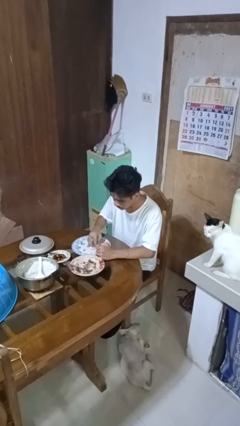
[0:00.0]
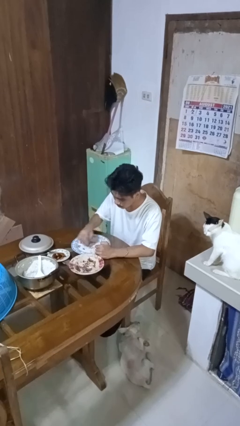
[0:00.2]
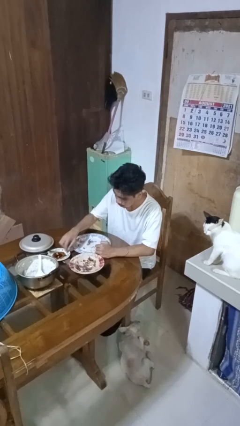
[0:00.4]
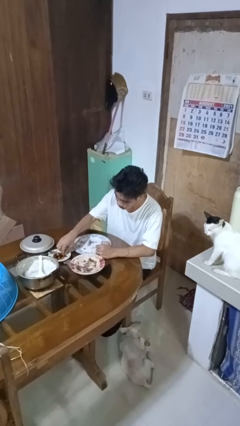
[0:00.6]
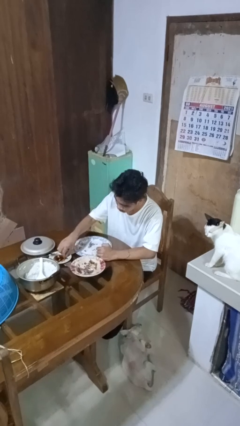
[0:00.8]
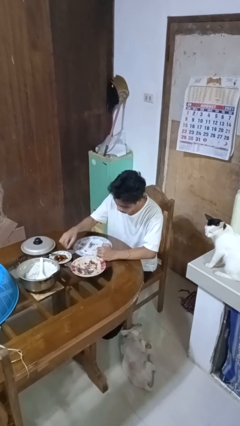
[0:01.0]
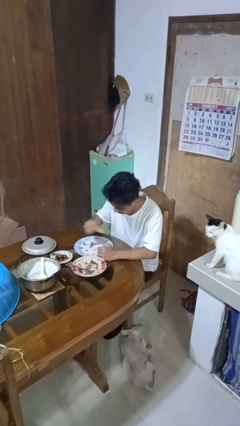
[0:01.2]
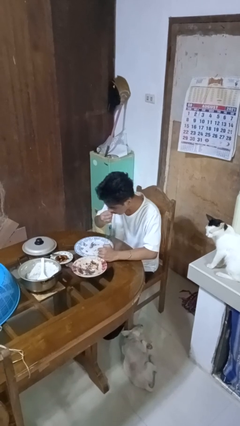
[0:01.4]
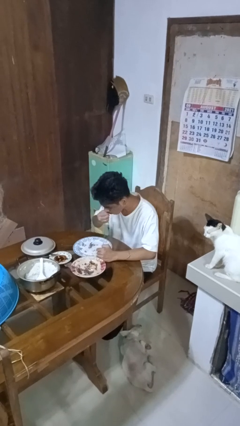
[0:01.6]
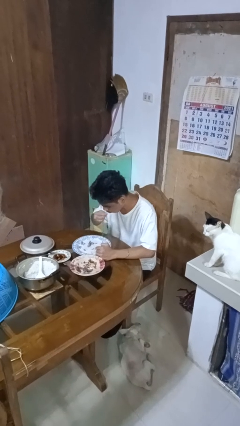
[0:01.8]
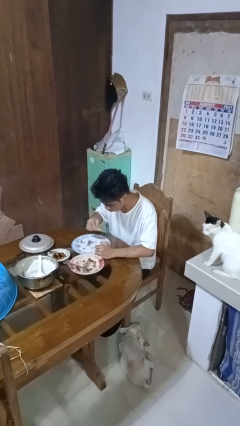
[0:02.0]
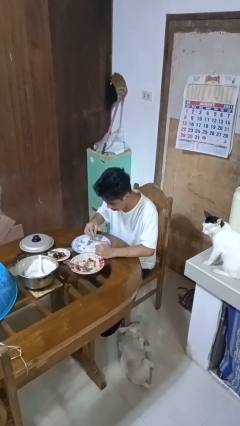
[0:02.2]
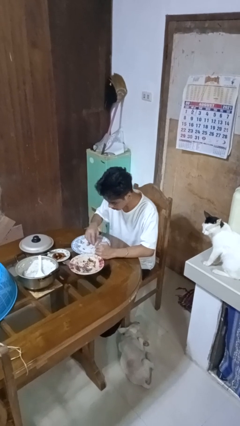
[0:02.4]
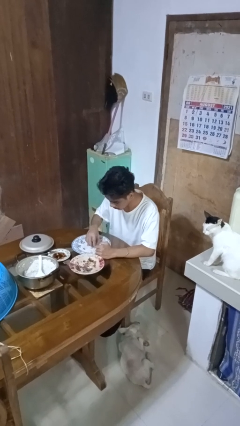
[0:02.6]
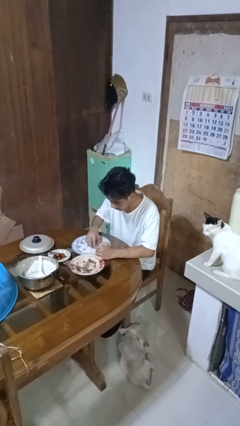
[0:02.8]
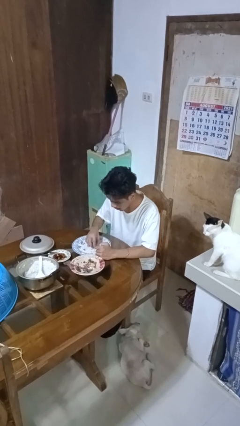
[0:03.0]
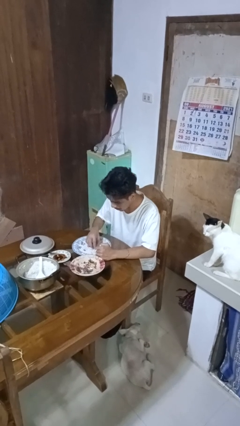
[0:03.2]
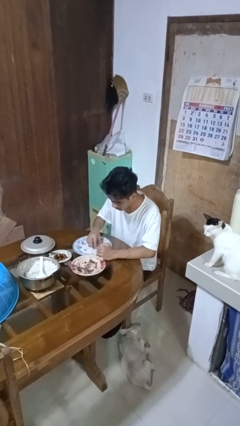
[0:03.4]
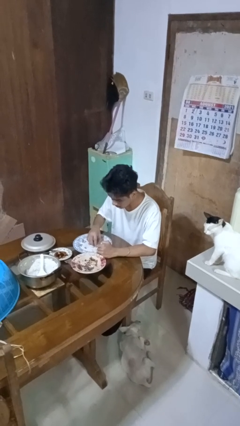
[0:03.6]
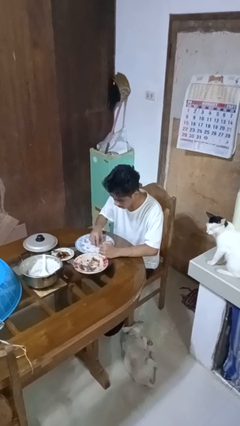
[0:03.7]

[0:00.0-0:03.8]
person eats with hands

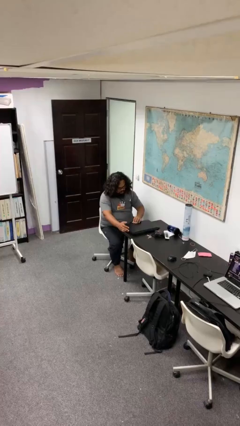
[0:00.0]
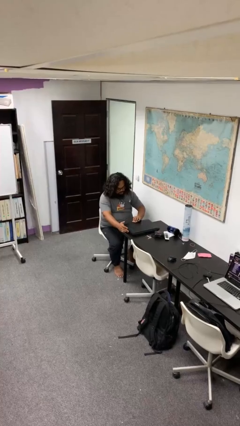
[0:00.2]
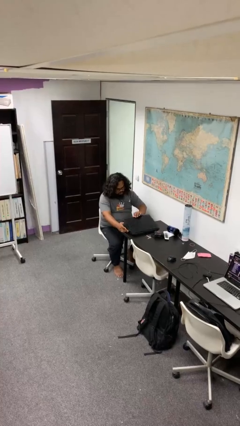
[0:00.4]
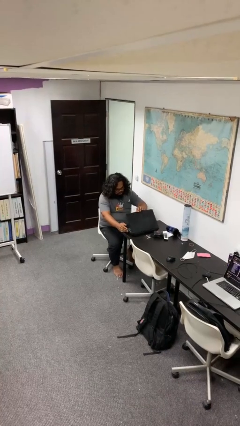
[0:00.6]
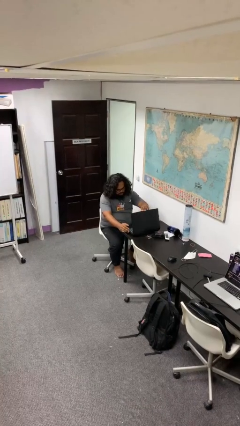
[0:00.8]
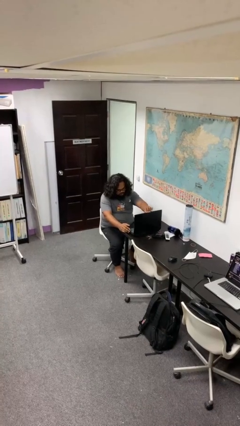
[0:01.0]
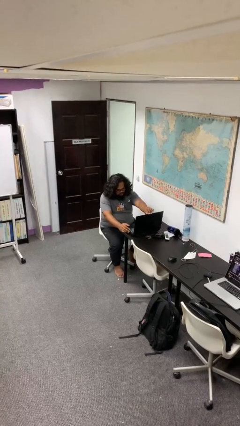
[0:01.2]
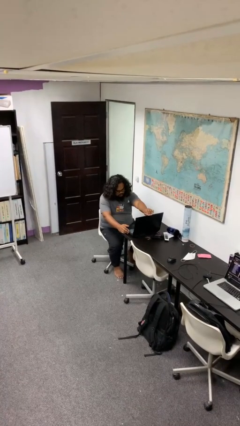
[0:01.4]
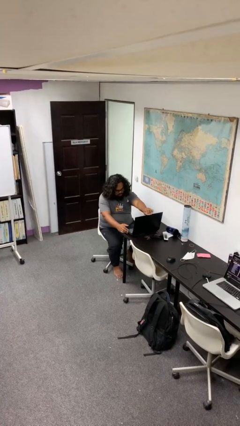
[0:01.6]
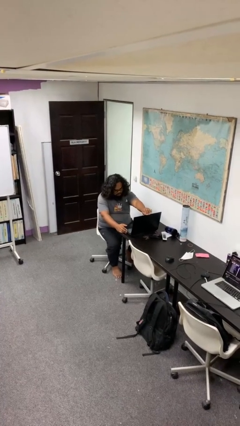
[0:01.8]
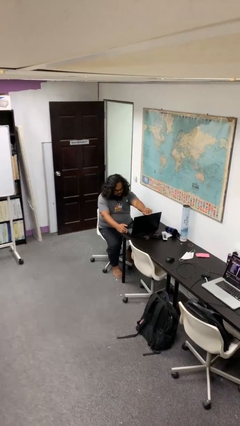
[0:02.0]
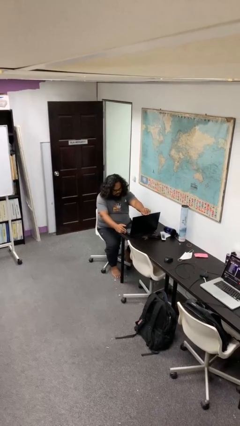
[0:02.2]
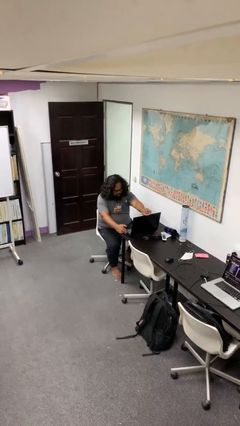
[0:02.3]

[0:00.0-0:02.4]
person opens laptop

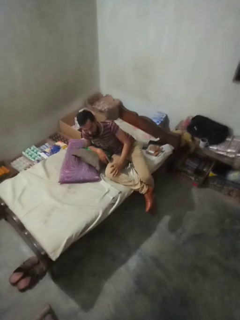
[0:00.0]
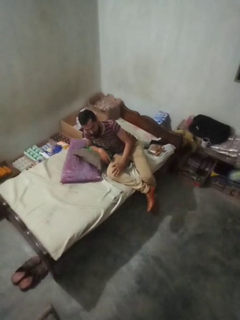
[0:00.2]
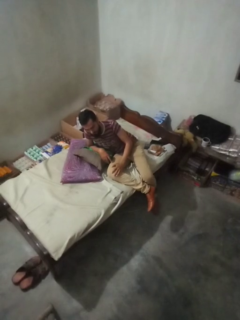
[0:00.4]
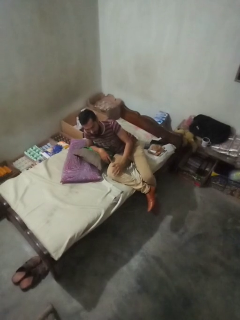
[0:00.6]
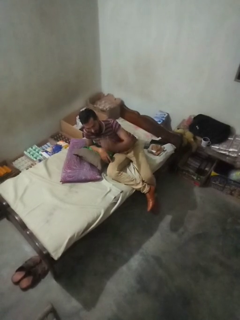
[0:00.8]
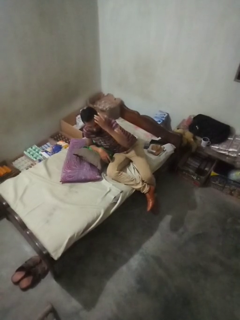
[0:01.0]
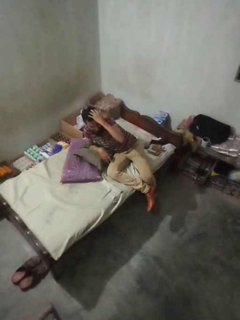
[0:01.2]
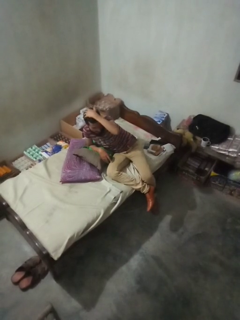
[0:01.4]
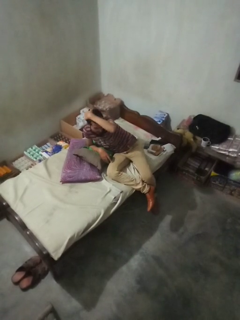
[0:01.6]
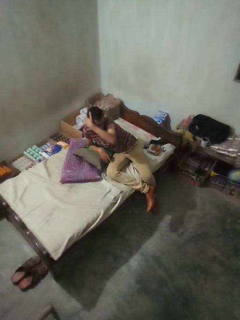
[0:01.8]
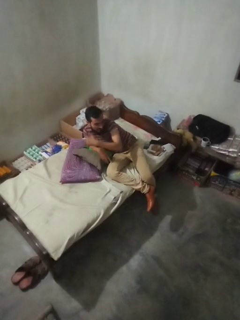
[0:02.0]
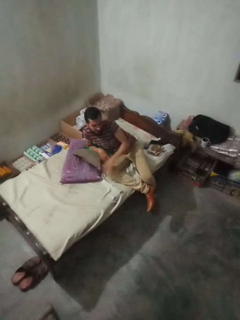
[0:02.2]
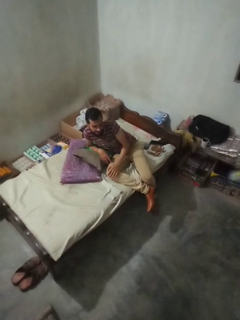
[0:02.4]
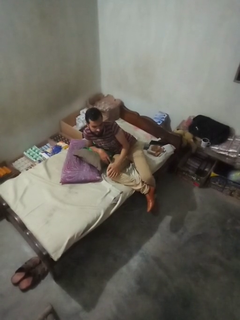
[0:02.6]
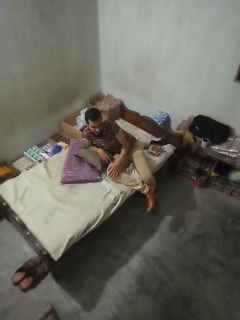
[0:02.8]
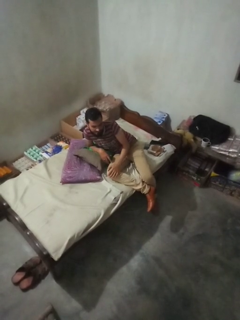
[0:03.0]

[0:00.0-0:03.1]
person strokes hair

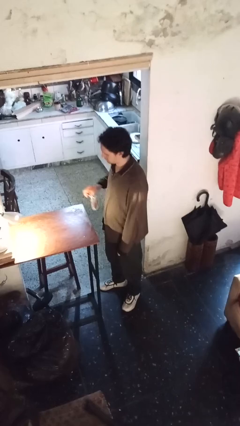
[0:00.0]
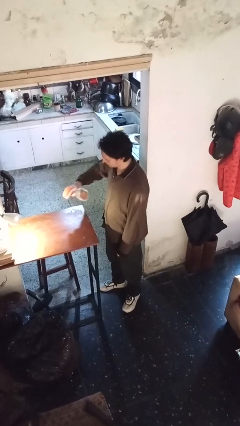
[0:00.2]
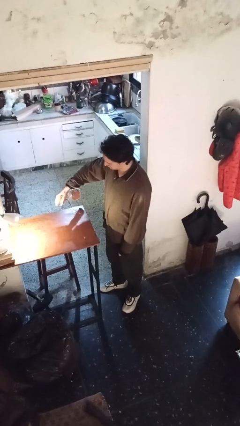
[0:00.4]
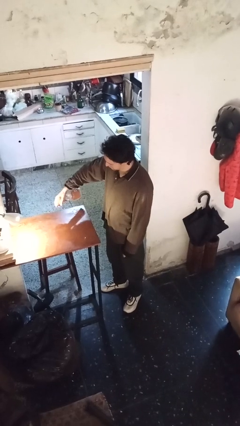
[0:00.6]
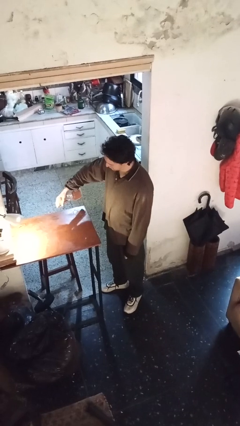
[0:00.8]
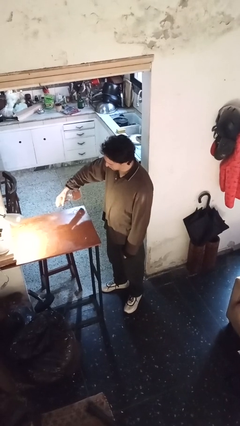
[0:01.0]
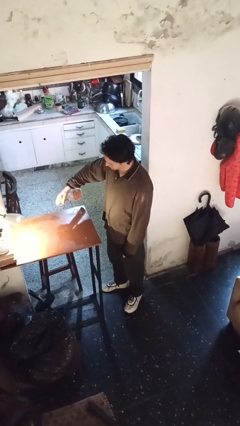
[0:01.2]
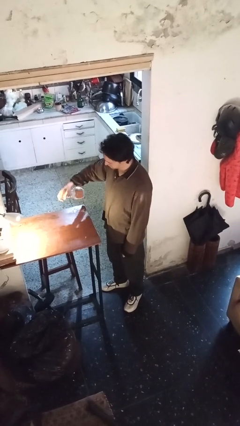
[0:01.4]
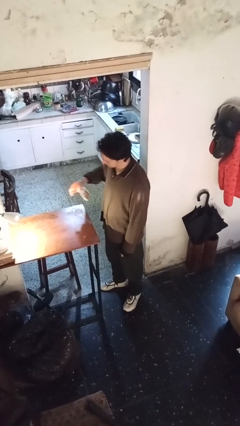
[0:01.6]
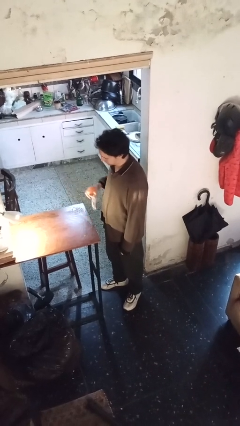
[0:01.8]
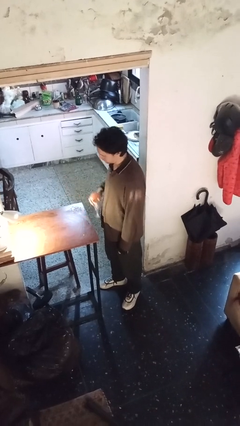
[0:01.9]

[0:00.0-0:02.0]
person sprays from bottle

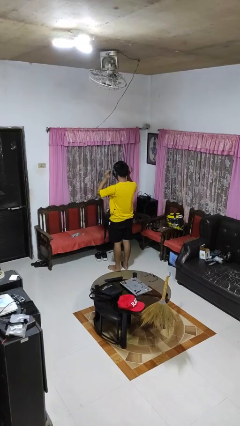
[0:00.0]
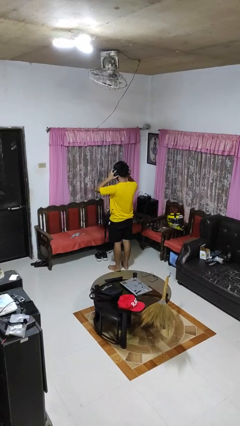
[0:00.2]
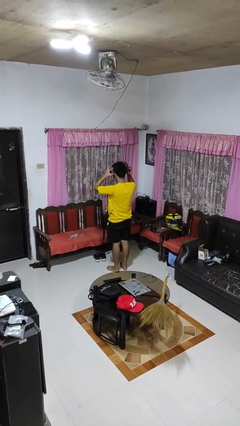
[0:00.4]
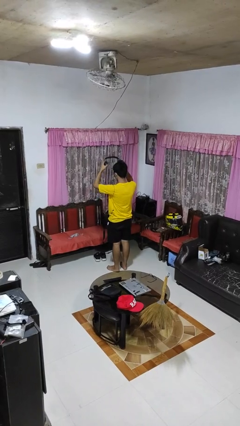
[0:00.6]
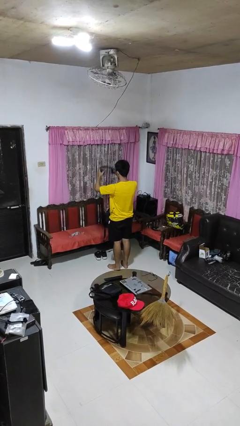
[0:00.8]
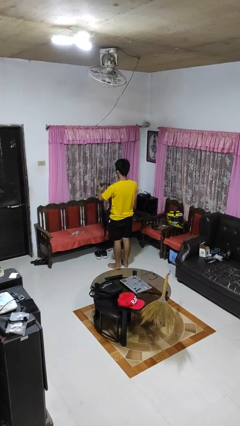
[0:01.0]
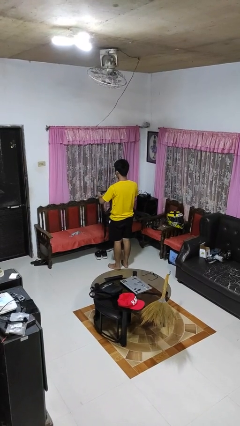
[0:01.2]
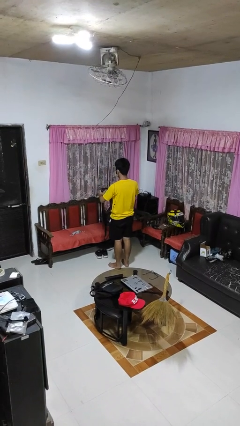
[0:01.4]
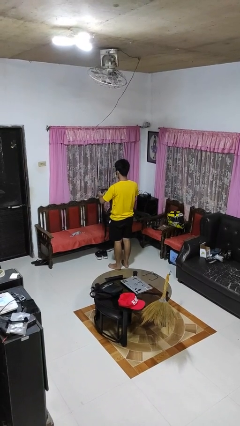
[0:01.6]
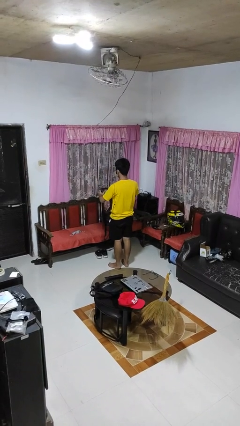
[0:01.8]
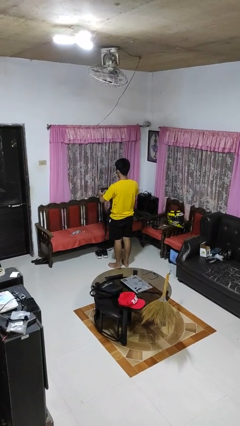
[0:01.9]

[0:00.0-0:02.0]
person takes off headphones

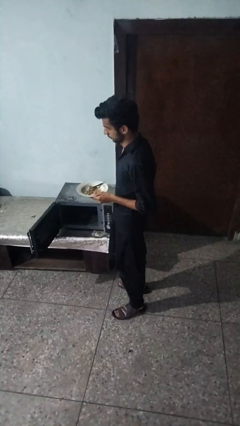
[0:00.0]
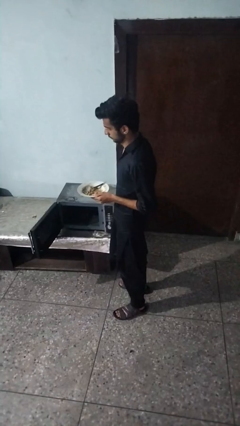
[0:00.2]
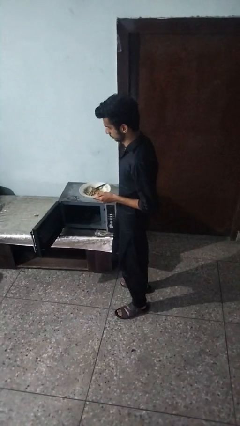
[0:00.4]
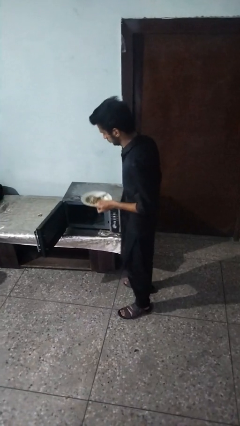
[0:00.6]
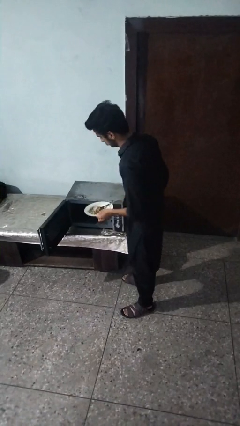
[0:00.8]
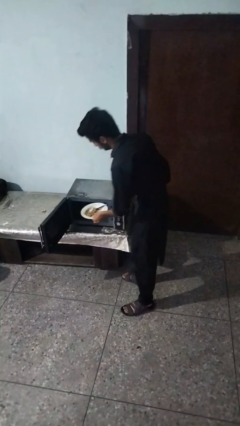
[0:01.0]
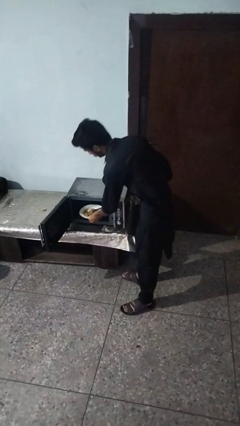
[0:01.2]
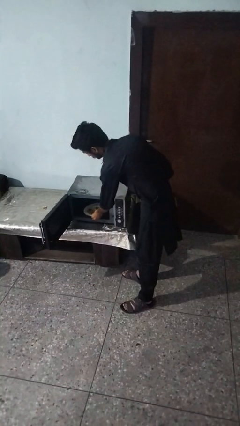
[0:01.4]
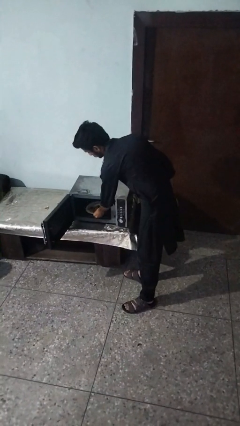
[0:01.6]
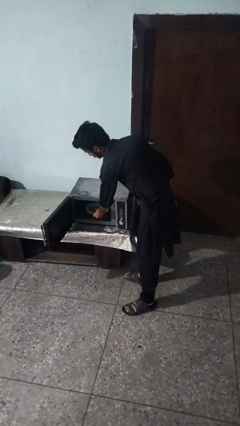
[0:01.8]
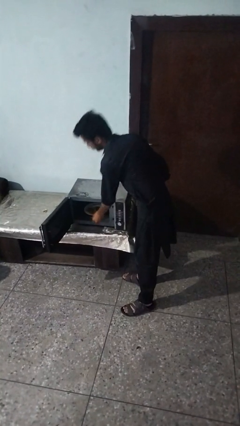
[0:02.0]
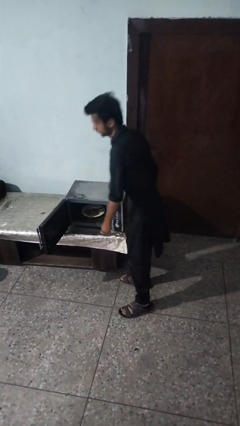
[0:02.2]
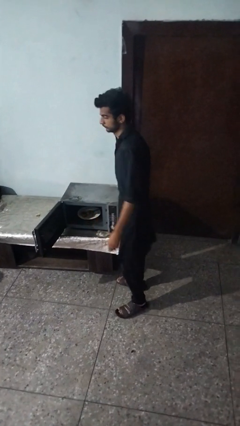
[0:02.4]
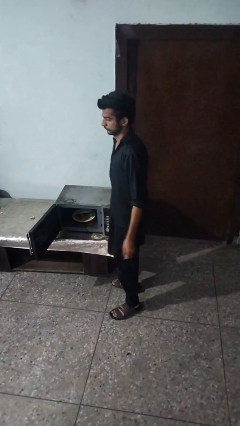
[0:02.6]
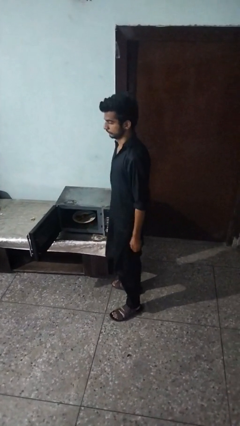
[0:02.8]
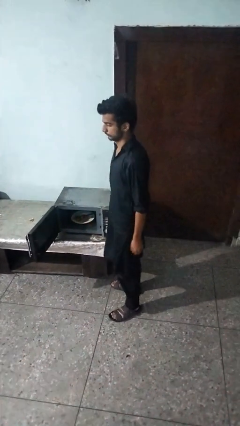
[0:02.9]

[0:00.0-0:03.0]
person puts object into oven

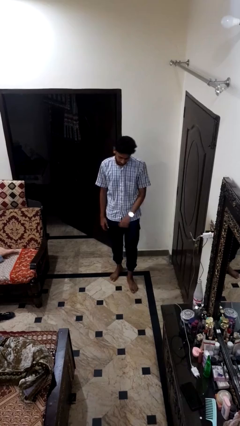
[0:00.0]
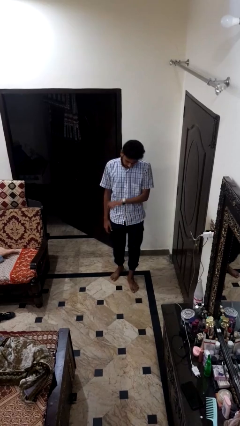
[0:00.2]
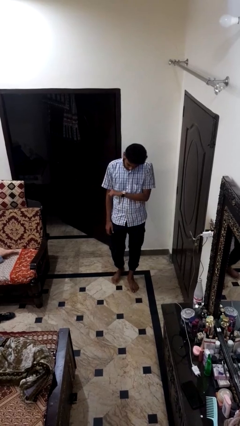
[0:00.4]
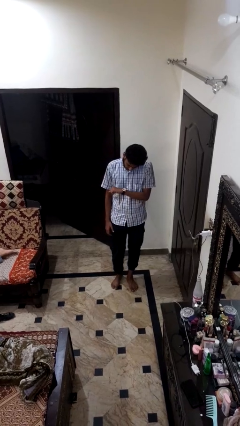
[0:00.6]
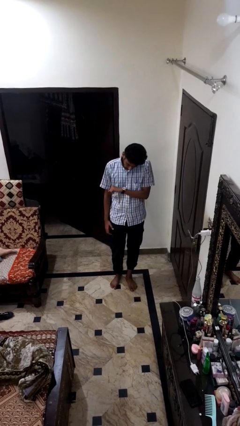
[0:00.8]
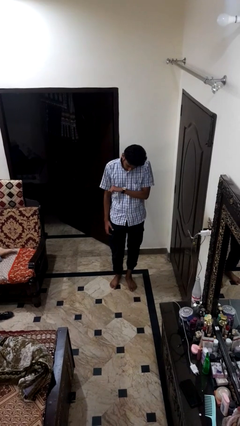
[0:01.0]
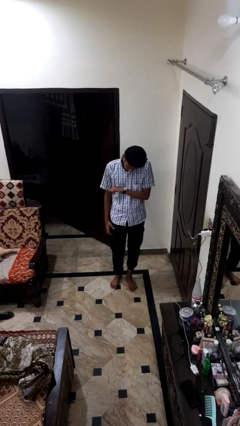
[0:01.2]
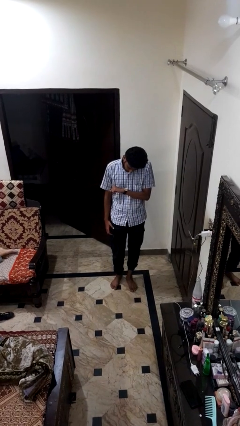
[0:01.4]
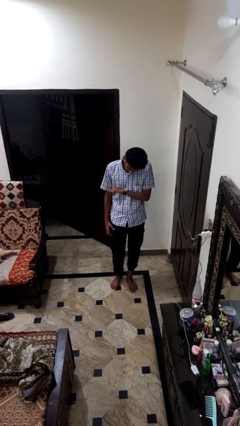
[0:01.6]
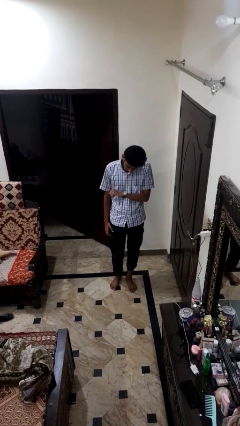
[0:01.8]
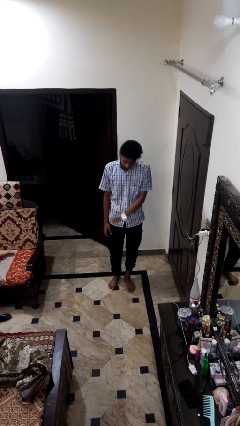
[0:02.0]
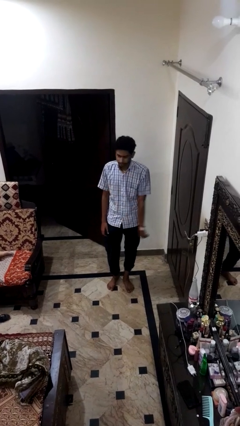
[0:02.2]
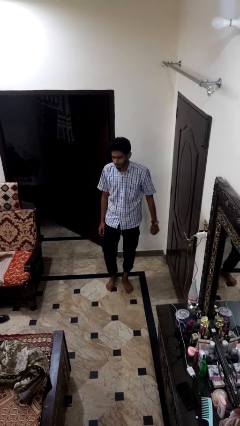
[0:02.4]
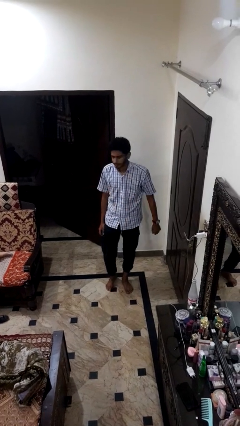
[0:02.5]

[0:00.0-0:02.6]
person looks at wristwatch
